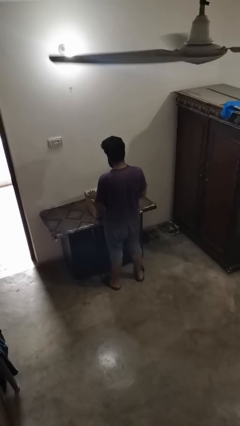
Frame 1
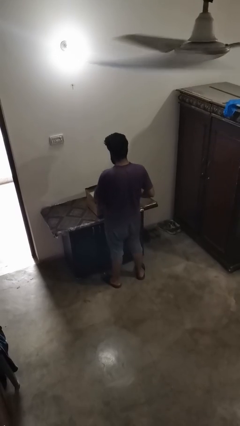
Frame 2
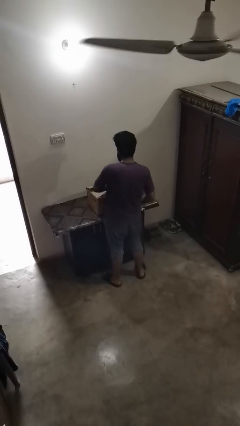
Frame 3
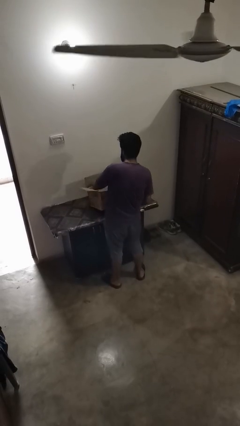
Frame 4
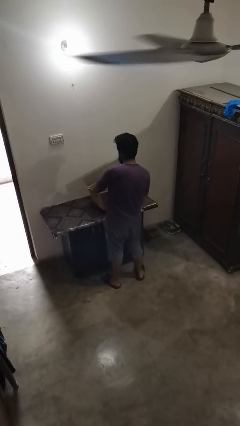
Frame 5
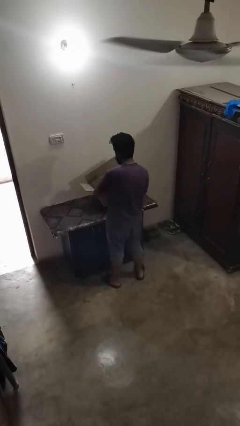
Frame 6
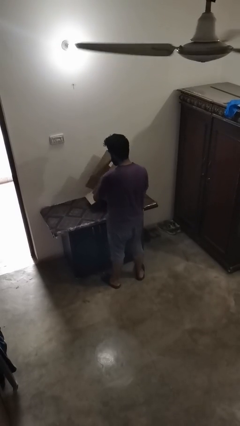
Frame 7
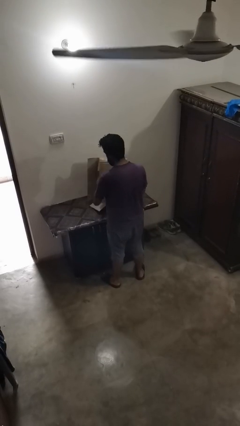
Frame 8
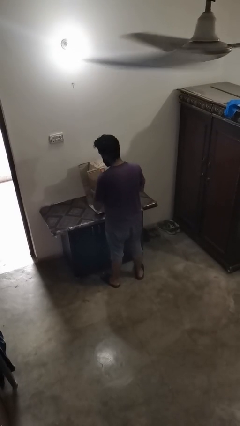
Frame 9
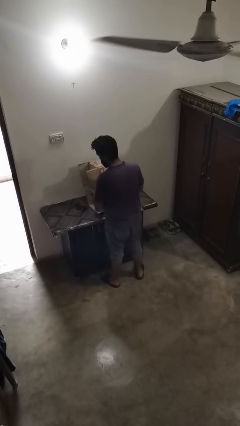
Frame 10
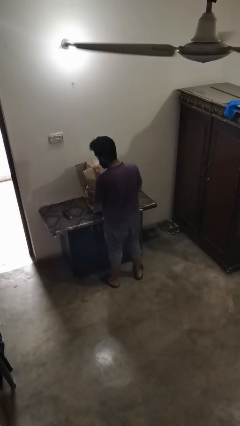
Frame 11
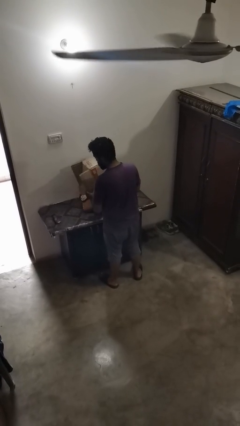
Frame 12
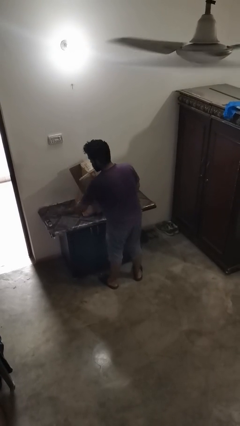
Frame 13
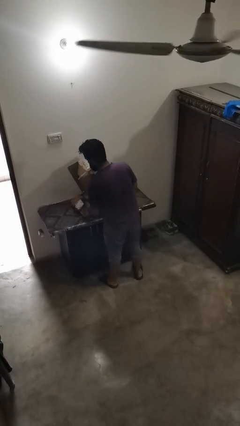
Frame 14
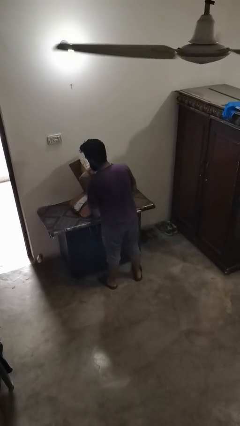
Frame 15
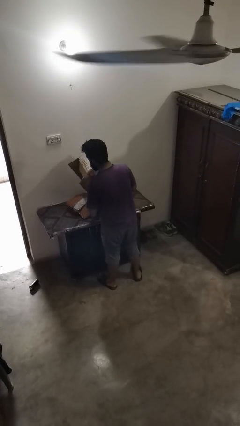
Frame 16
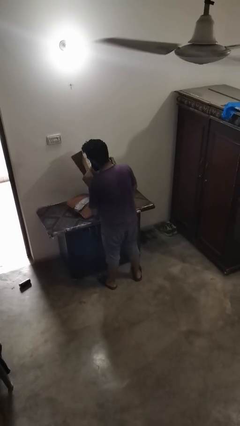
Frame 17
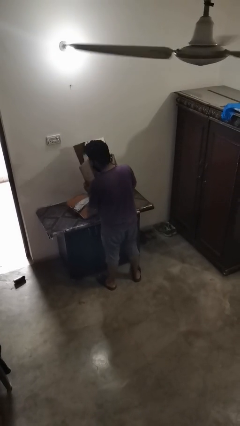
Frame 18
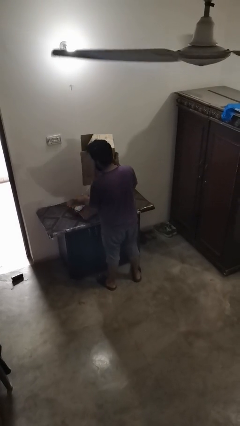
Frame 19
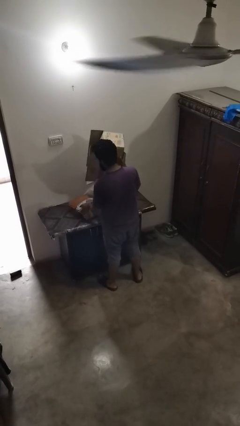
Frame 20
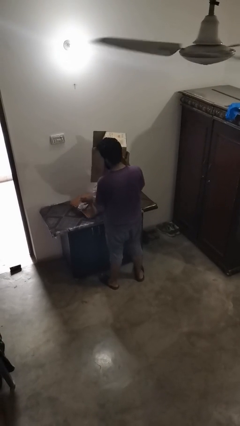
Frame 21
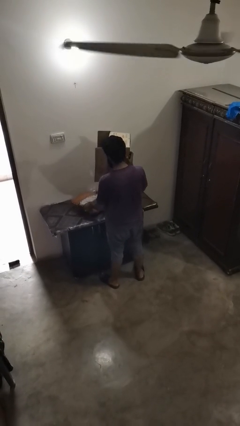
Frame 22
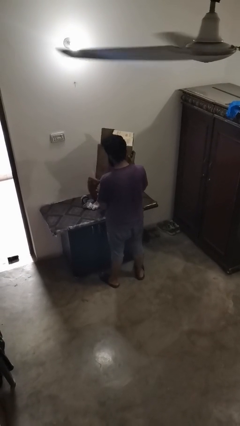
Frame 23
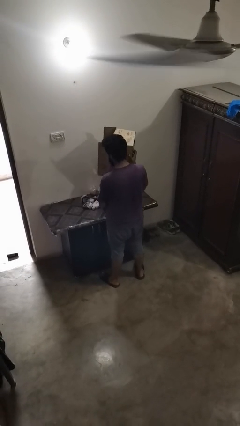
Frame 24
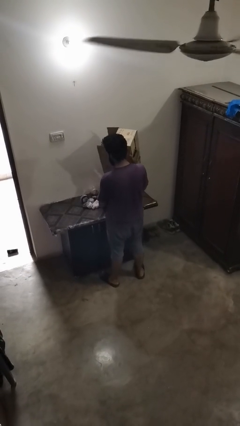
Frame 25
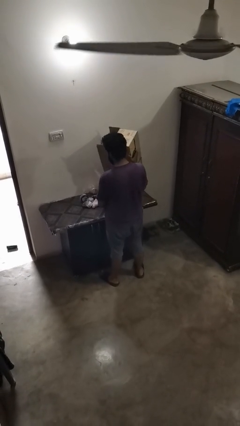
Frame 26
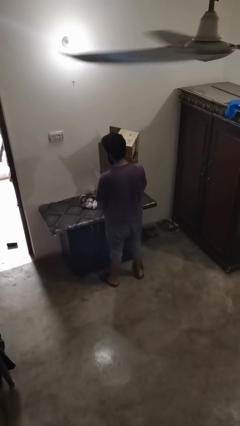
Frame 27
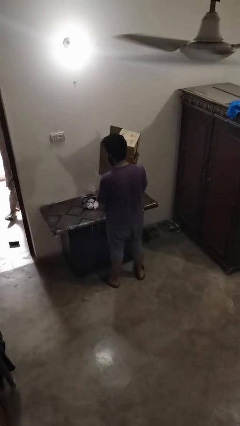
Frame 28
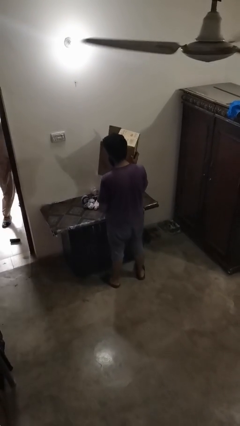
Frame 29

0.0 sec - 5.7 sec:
person unloads box onto table

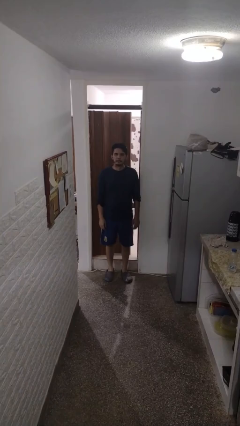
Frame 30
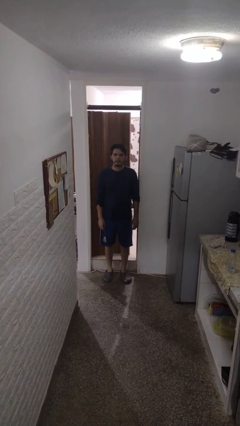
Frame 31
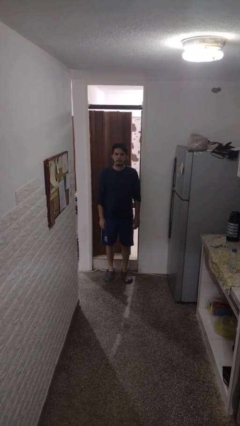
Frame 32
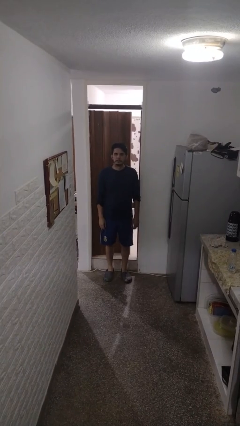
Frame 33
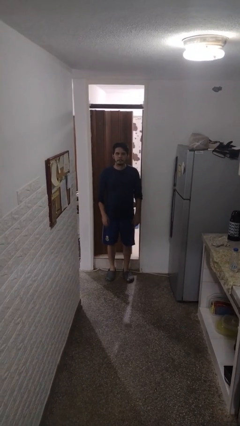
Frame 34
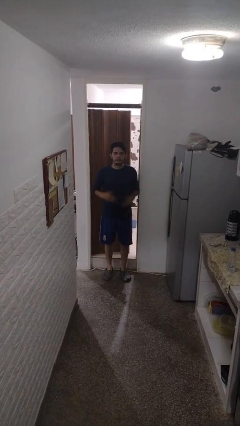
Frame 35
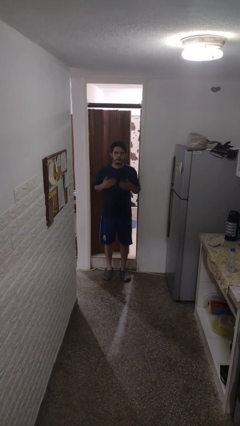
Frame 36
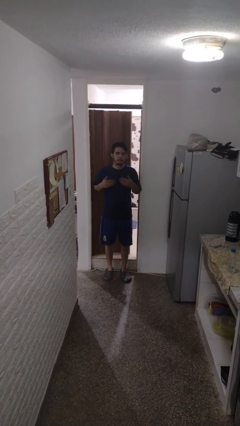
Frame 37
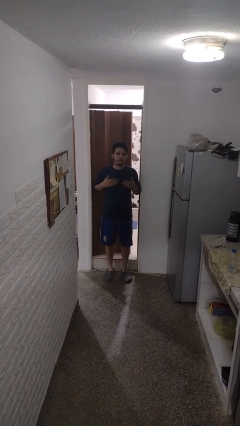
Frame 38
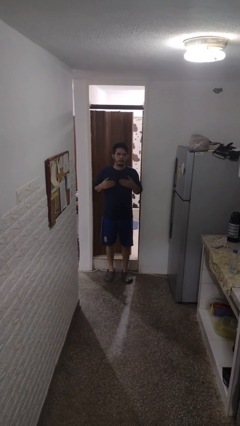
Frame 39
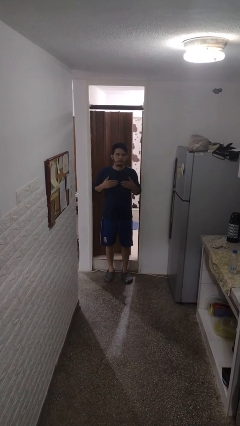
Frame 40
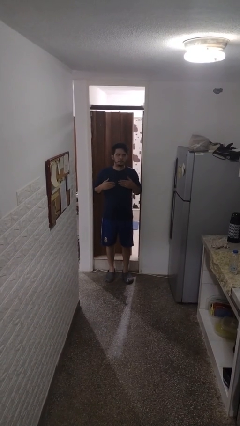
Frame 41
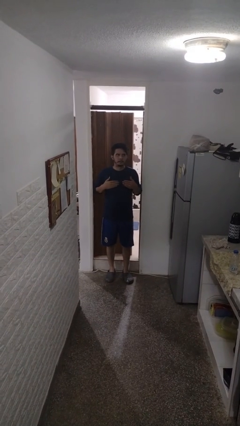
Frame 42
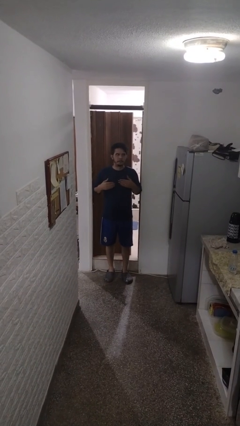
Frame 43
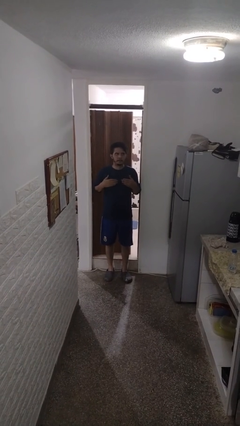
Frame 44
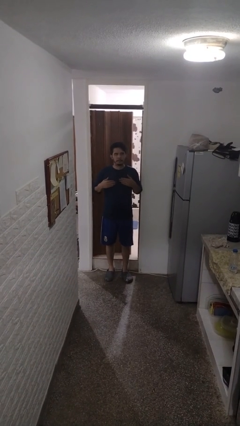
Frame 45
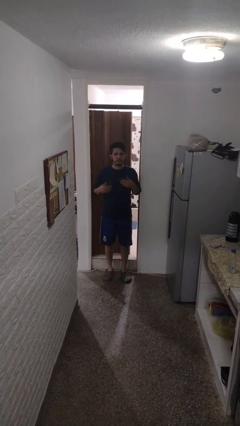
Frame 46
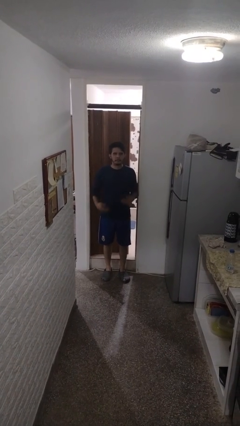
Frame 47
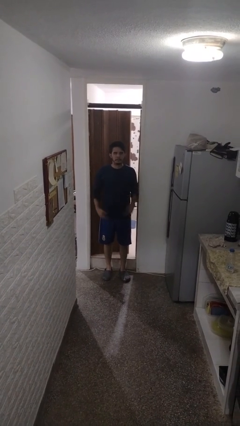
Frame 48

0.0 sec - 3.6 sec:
person drums on chest

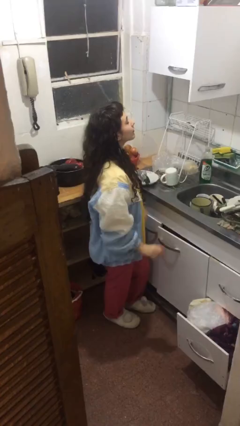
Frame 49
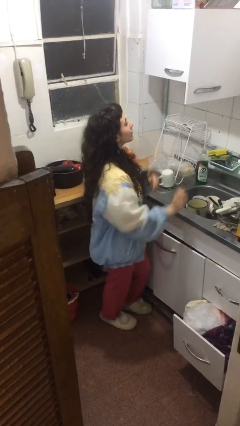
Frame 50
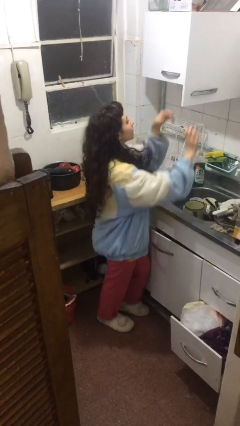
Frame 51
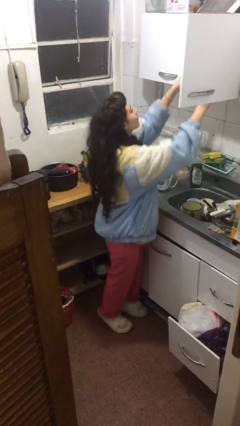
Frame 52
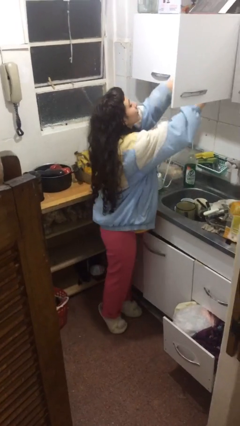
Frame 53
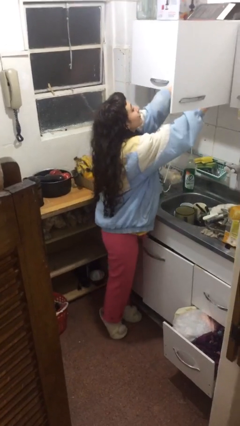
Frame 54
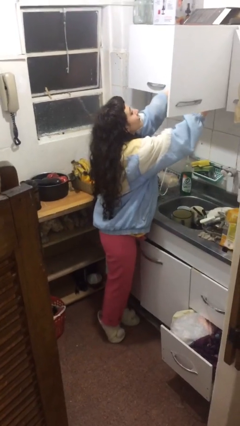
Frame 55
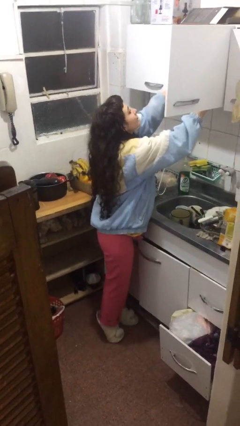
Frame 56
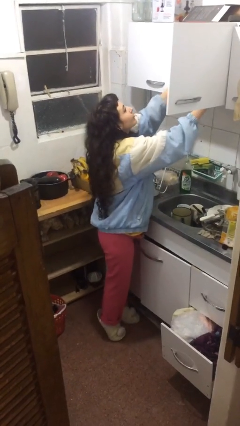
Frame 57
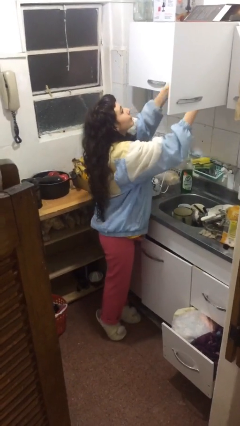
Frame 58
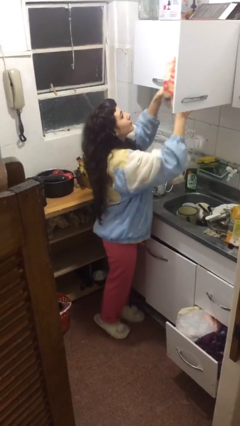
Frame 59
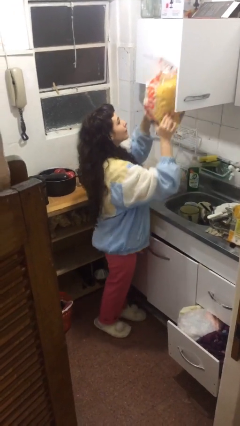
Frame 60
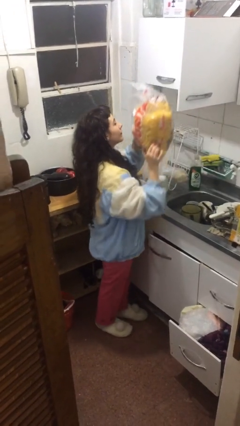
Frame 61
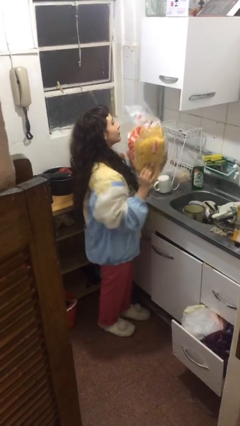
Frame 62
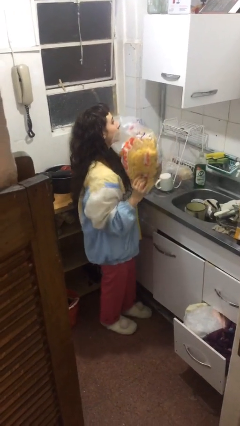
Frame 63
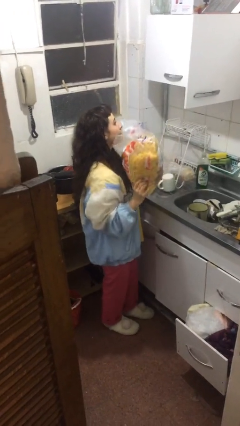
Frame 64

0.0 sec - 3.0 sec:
person picks up object from cabinet

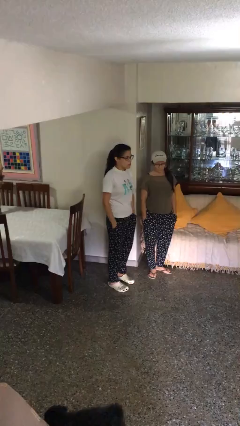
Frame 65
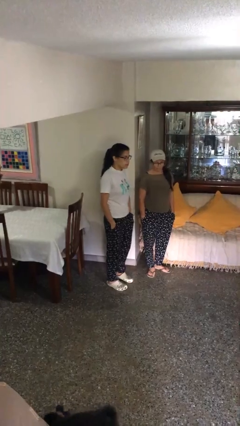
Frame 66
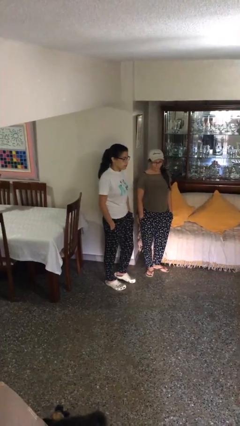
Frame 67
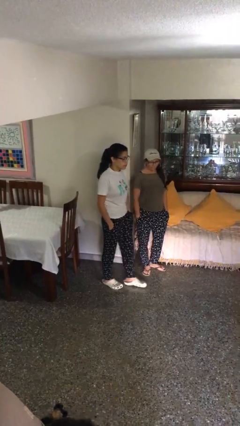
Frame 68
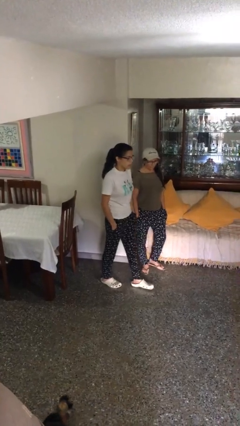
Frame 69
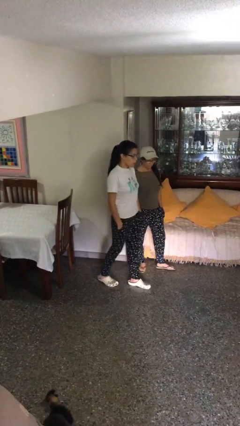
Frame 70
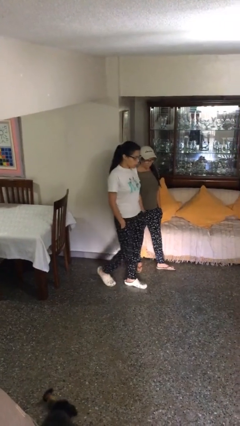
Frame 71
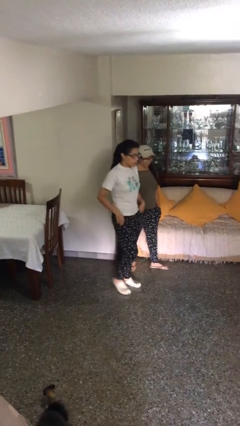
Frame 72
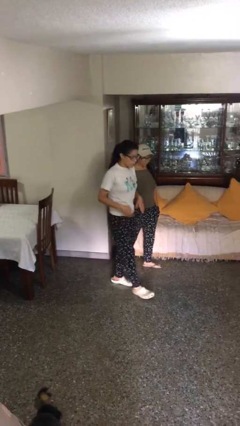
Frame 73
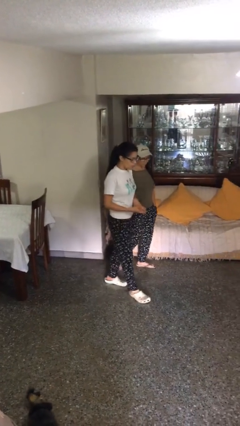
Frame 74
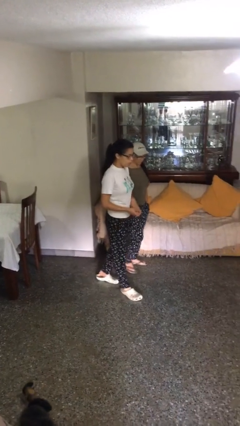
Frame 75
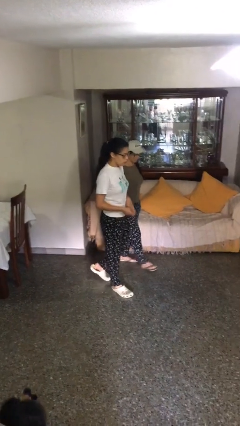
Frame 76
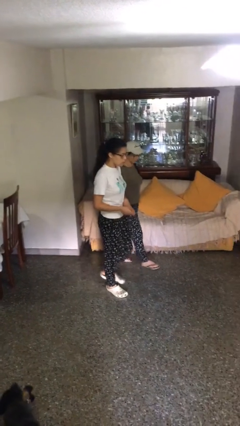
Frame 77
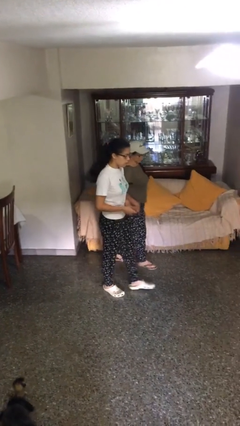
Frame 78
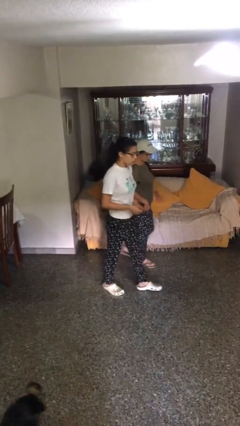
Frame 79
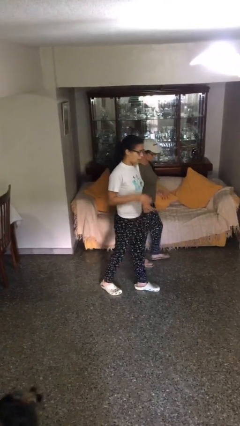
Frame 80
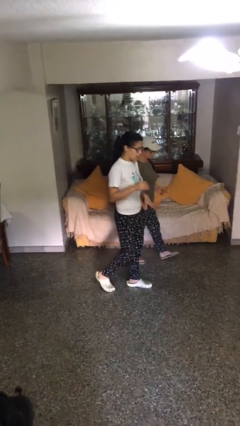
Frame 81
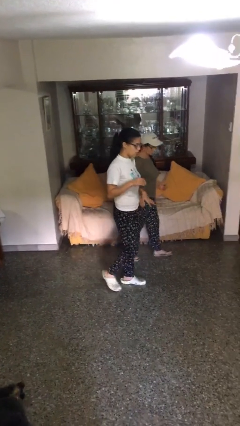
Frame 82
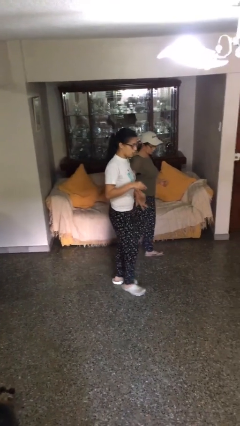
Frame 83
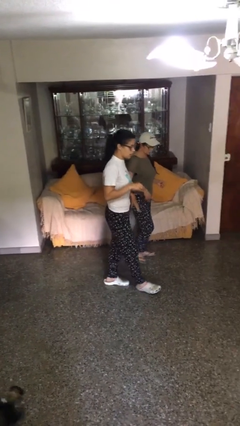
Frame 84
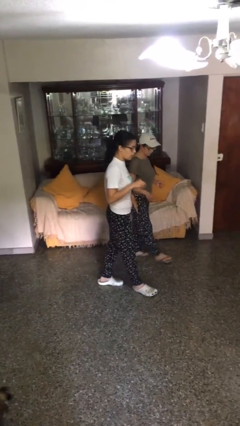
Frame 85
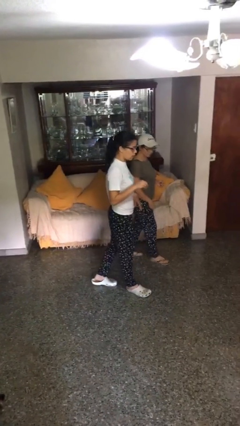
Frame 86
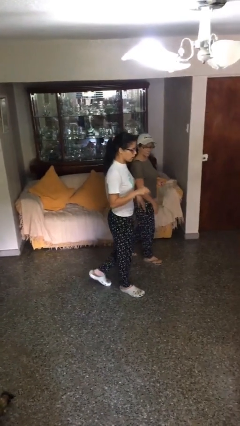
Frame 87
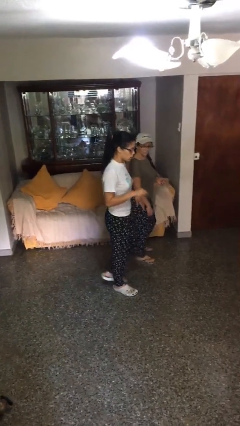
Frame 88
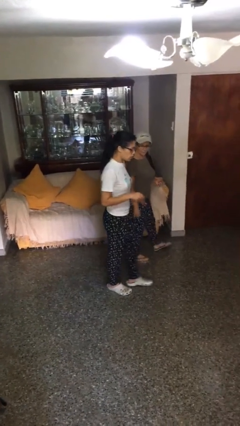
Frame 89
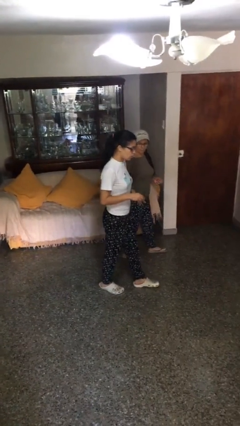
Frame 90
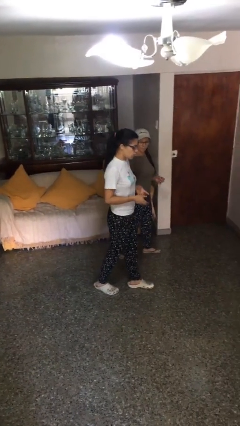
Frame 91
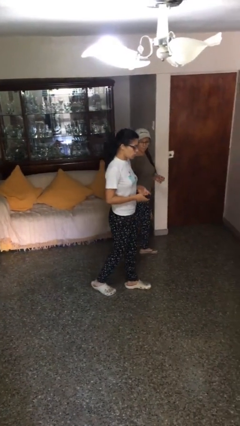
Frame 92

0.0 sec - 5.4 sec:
person talks to person

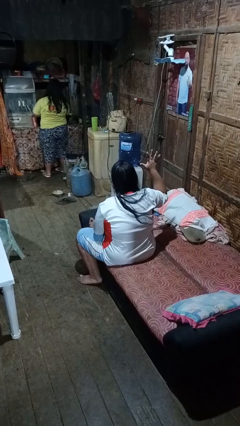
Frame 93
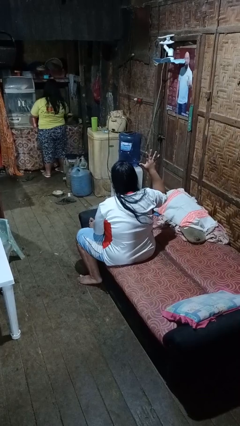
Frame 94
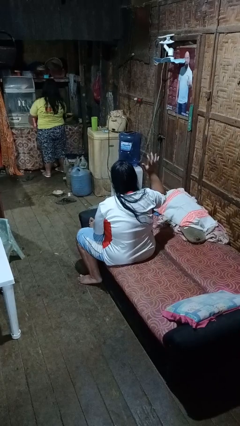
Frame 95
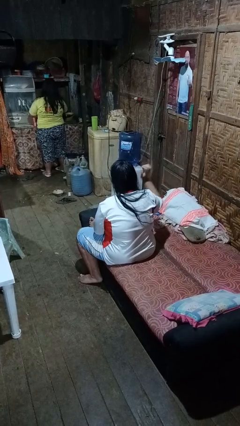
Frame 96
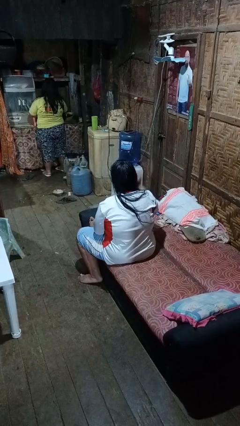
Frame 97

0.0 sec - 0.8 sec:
person gestures number five
